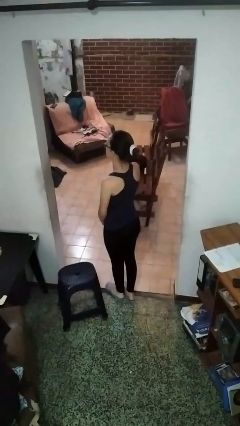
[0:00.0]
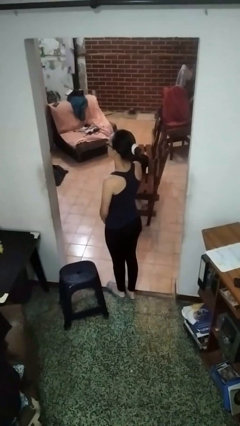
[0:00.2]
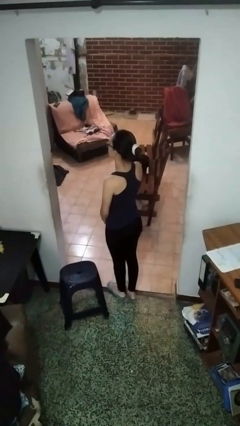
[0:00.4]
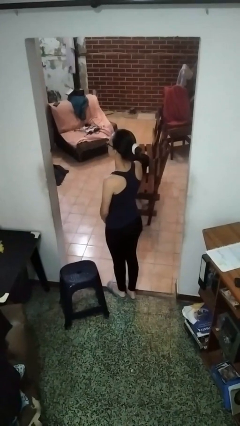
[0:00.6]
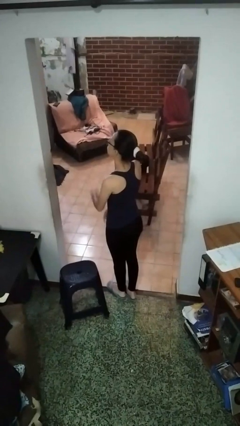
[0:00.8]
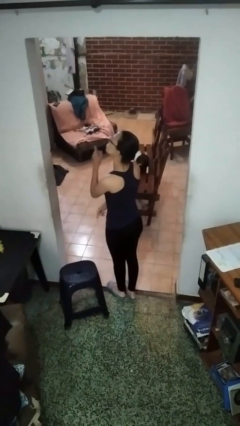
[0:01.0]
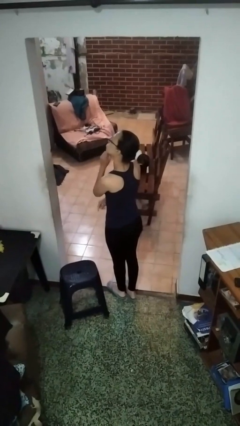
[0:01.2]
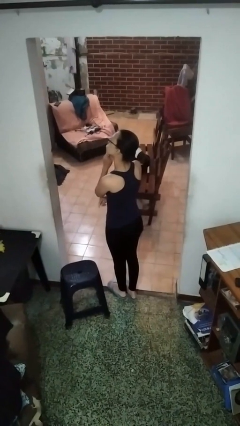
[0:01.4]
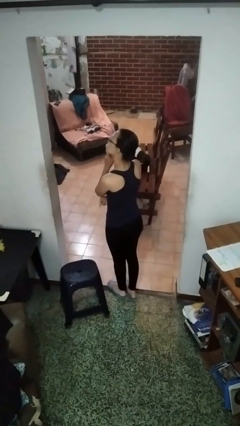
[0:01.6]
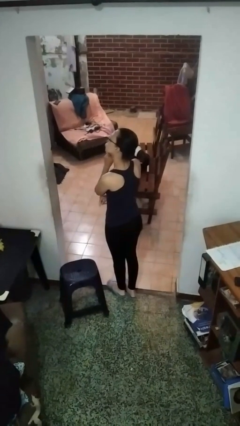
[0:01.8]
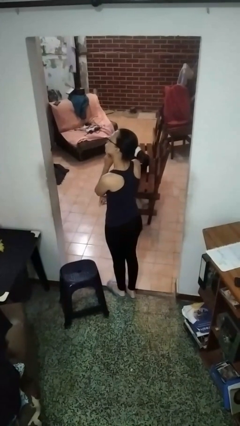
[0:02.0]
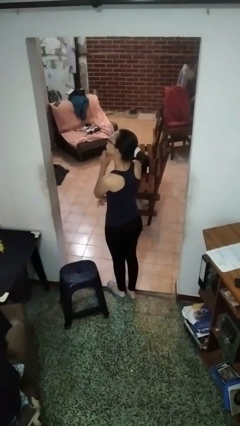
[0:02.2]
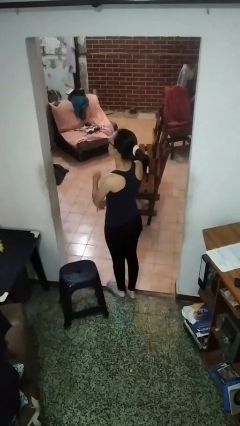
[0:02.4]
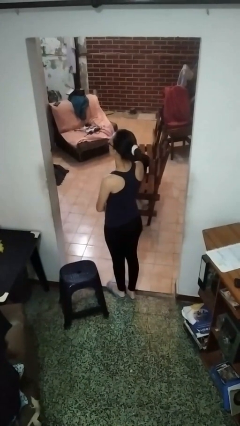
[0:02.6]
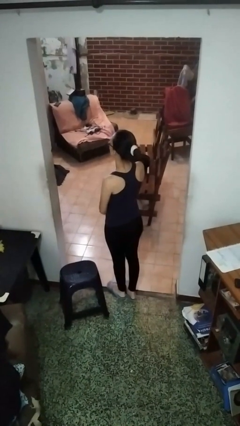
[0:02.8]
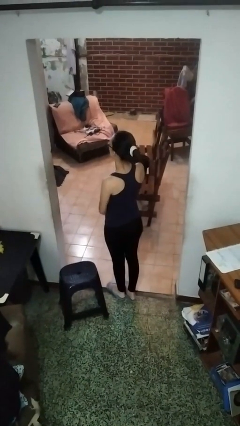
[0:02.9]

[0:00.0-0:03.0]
person strokes chin

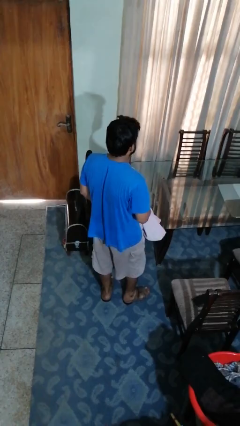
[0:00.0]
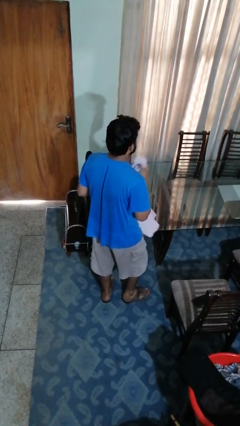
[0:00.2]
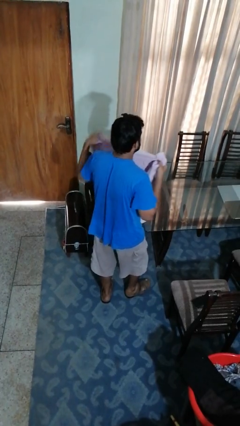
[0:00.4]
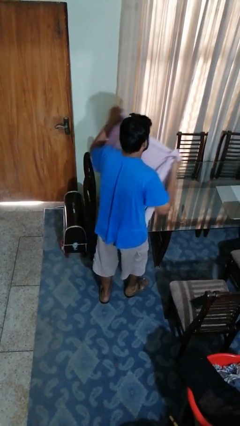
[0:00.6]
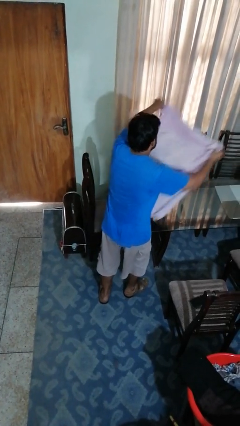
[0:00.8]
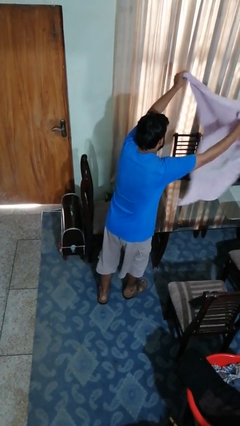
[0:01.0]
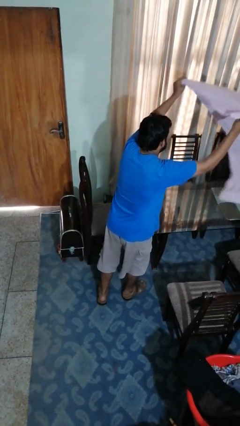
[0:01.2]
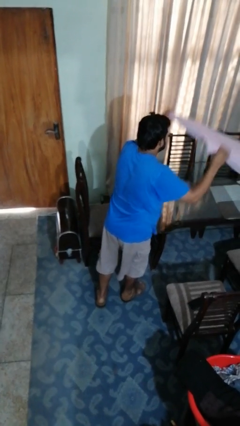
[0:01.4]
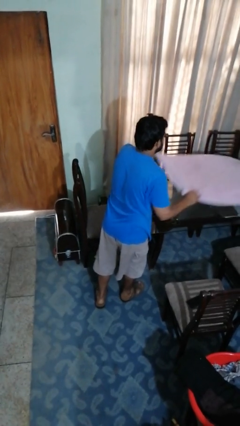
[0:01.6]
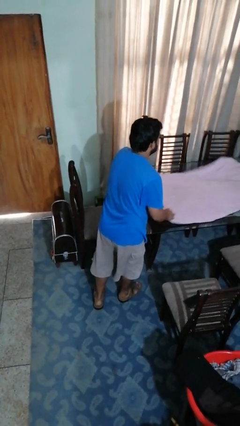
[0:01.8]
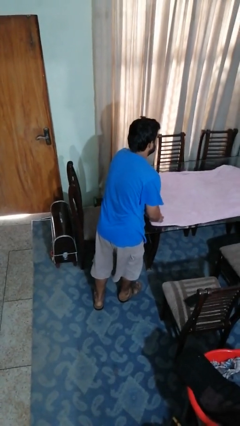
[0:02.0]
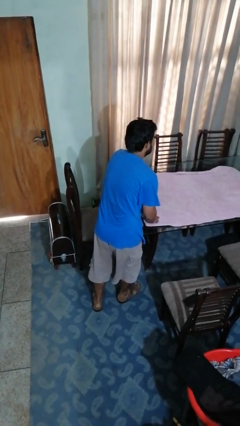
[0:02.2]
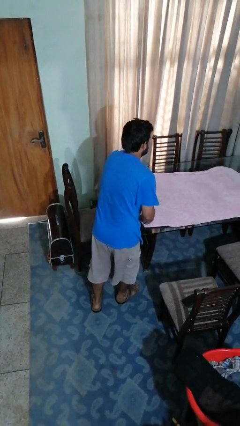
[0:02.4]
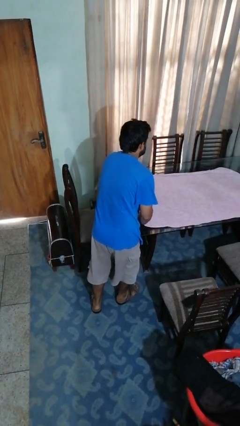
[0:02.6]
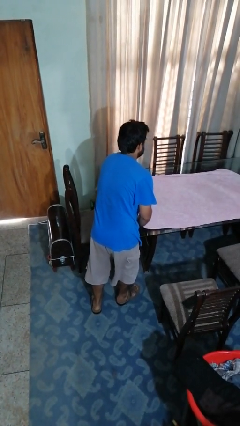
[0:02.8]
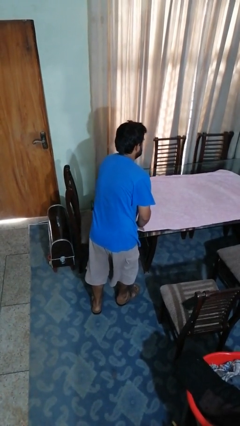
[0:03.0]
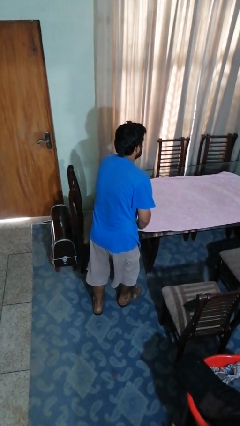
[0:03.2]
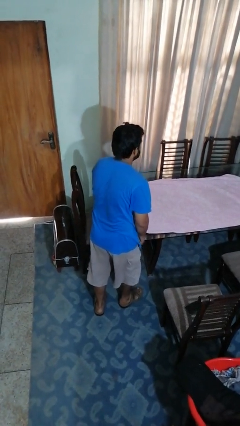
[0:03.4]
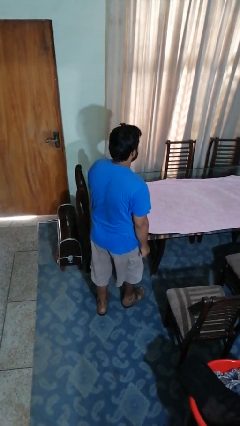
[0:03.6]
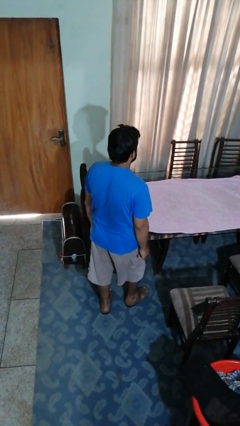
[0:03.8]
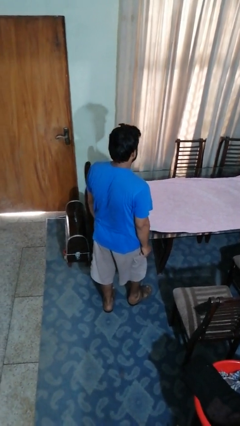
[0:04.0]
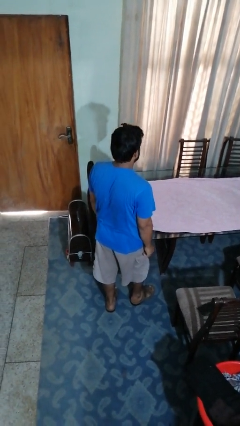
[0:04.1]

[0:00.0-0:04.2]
person spreads tablecloth

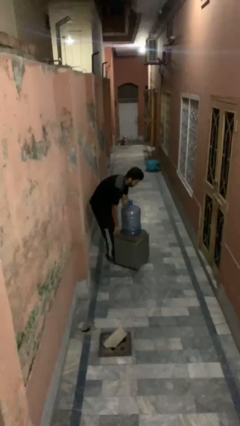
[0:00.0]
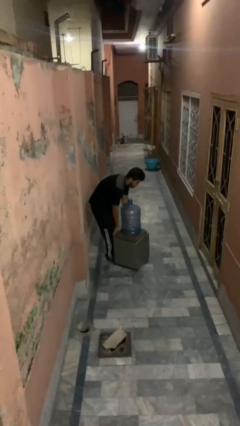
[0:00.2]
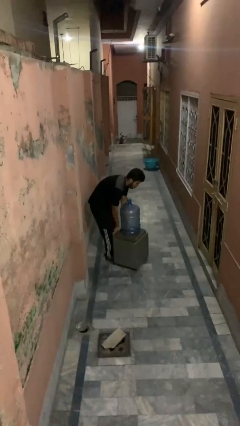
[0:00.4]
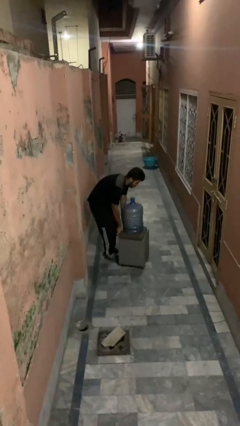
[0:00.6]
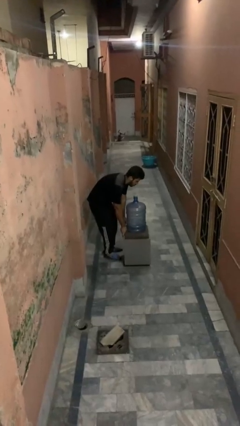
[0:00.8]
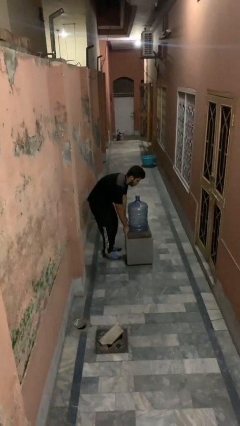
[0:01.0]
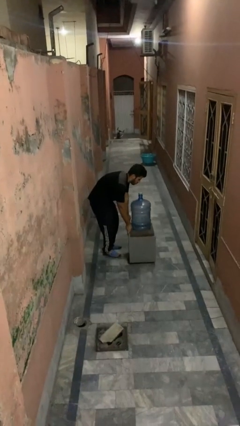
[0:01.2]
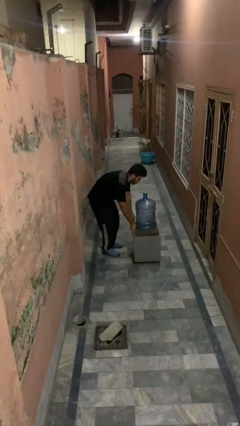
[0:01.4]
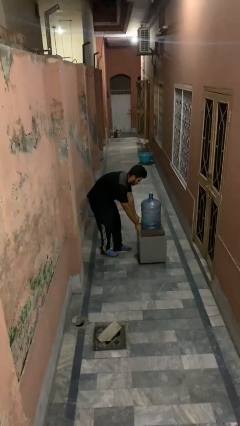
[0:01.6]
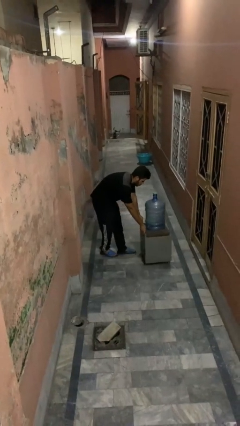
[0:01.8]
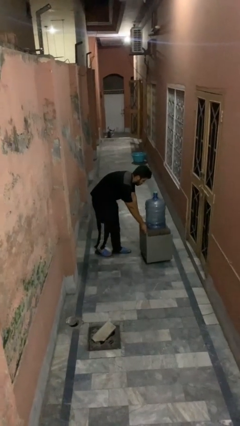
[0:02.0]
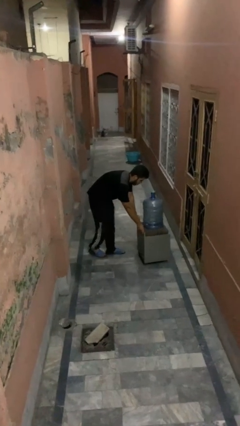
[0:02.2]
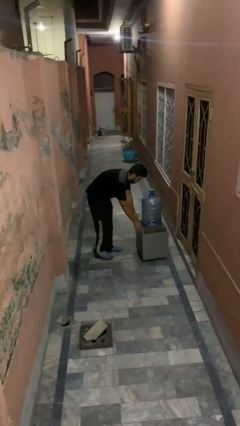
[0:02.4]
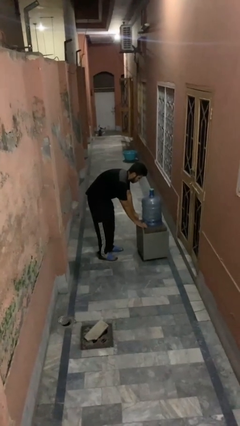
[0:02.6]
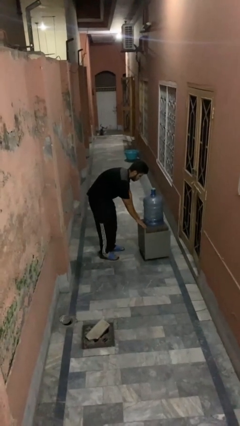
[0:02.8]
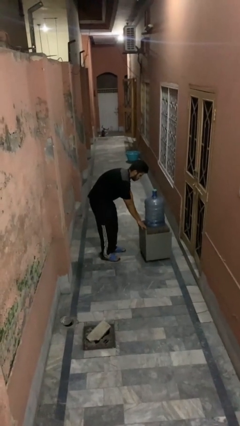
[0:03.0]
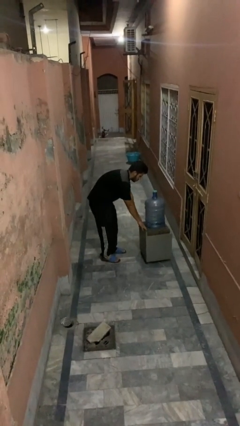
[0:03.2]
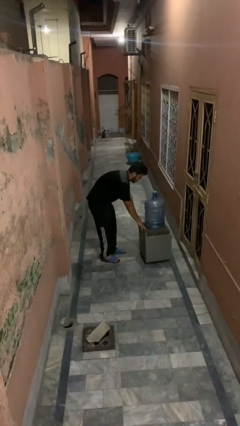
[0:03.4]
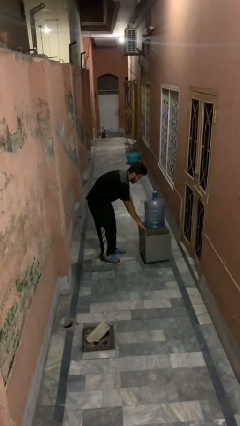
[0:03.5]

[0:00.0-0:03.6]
person pushes wheeled cart

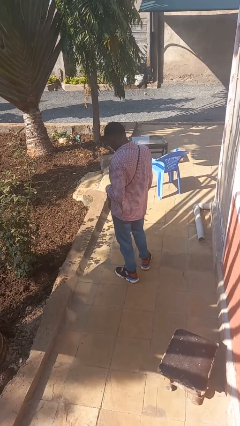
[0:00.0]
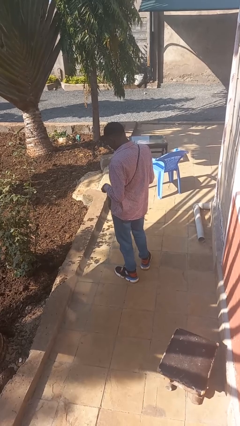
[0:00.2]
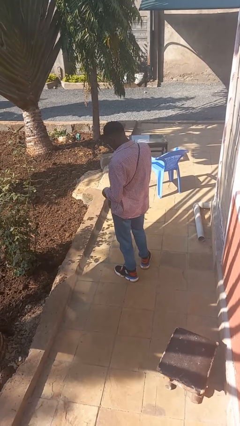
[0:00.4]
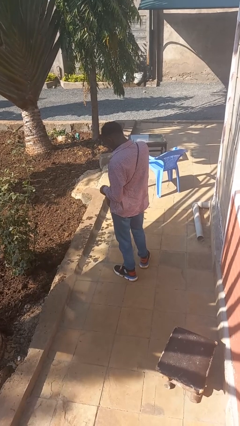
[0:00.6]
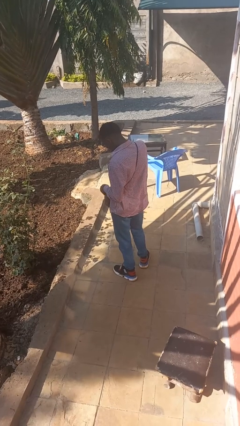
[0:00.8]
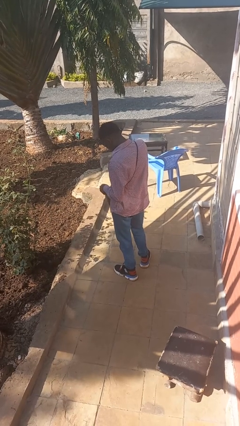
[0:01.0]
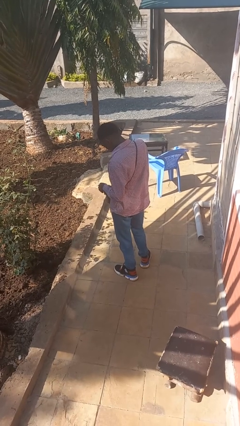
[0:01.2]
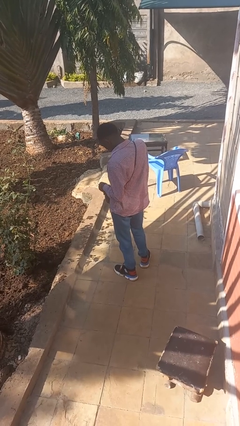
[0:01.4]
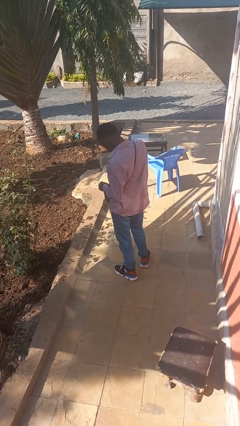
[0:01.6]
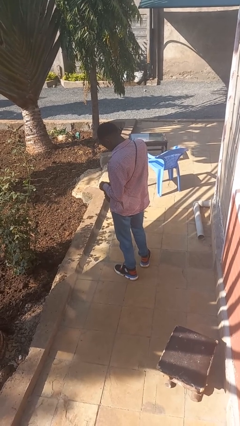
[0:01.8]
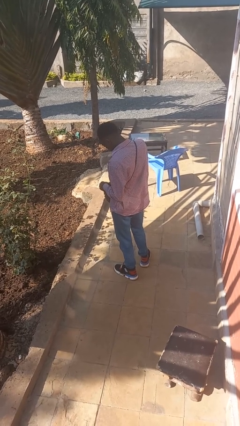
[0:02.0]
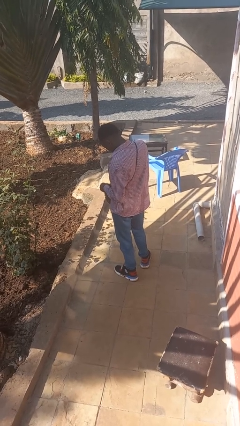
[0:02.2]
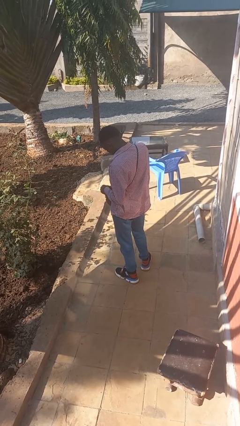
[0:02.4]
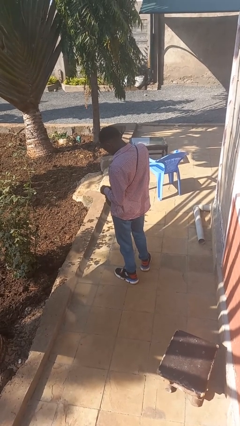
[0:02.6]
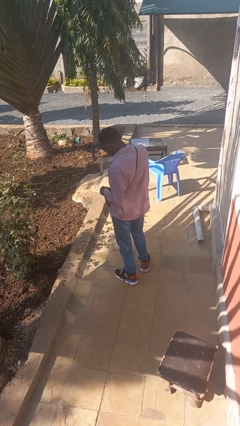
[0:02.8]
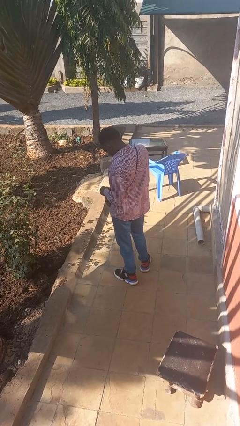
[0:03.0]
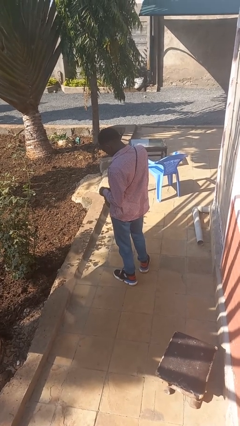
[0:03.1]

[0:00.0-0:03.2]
person searches in purse

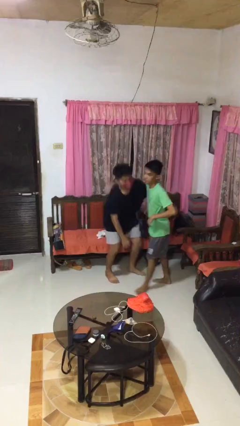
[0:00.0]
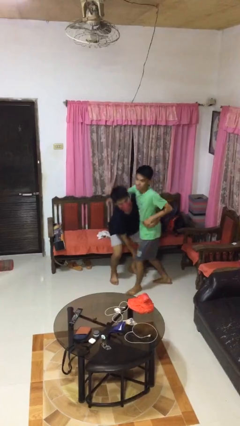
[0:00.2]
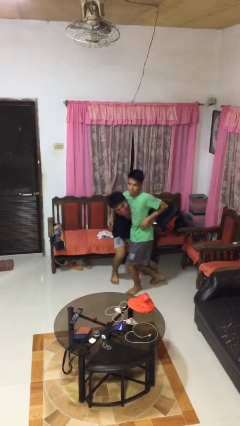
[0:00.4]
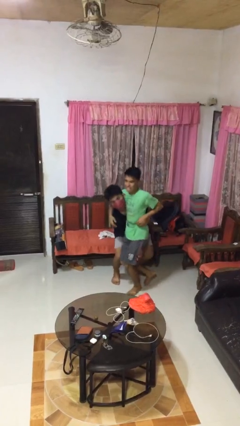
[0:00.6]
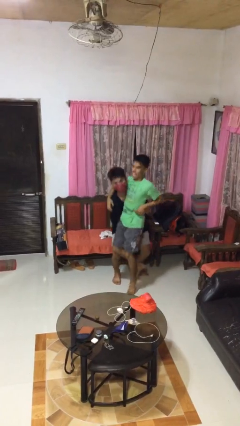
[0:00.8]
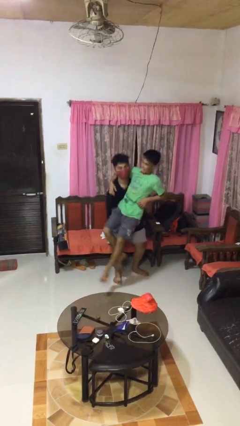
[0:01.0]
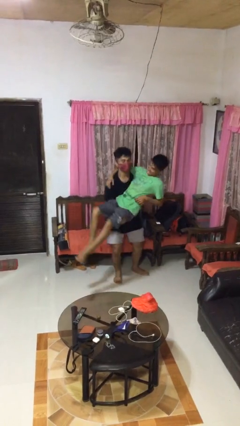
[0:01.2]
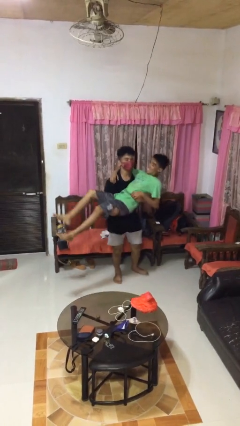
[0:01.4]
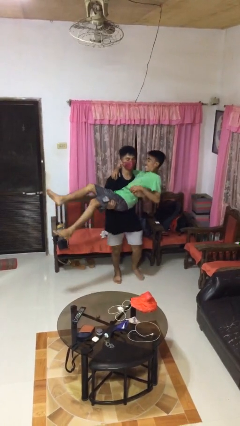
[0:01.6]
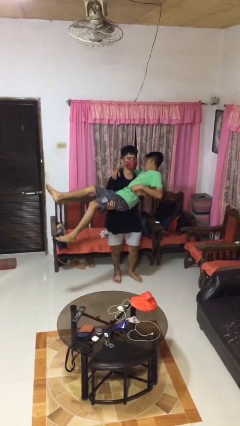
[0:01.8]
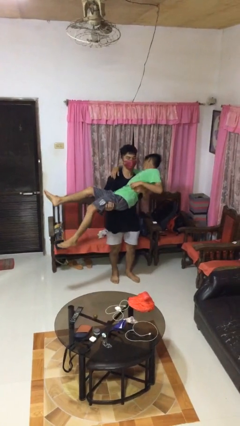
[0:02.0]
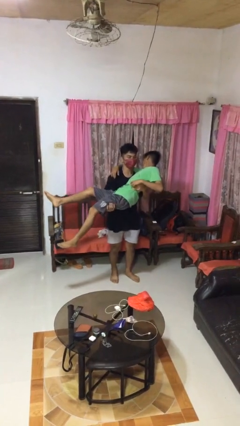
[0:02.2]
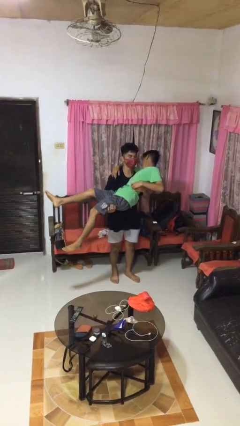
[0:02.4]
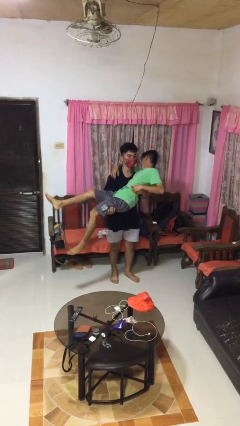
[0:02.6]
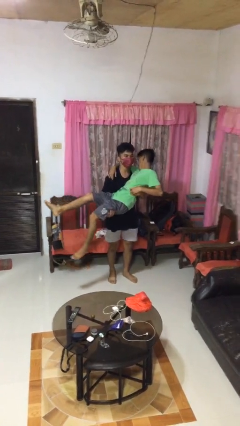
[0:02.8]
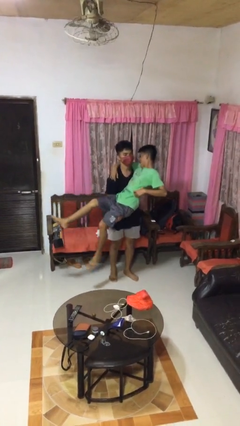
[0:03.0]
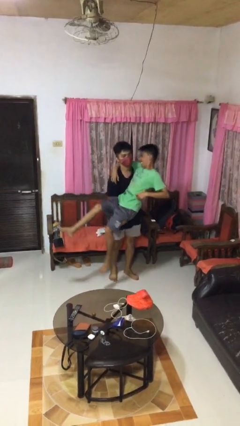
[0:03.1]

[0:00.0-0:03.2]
person picks up person

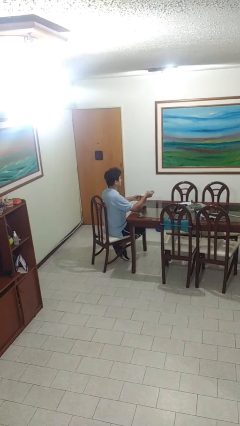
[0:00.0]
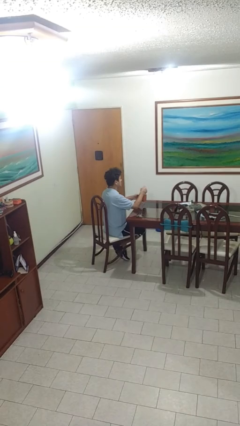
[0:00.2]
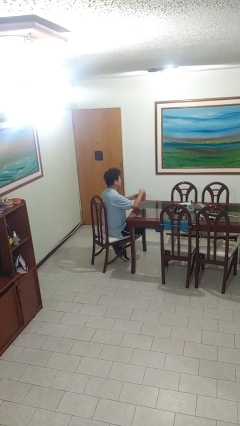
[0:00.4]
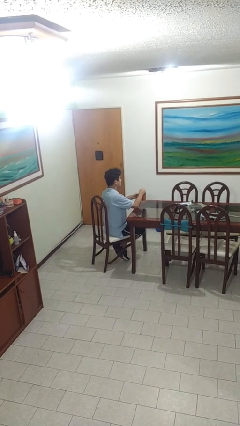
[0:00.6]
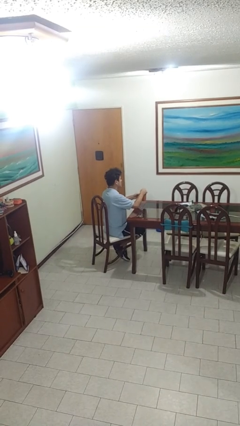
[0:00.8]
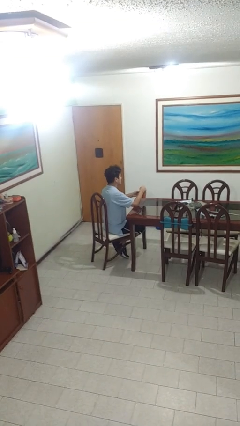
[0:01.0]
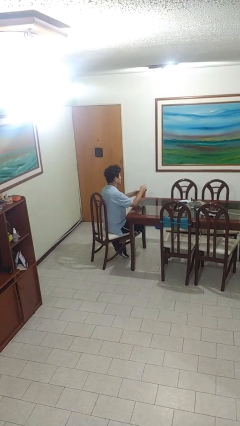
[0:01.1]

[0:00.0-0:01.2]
person stirs mug
